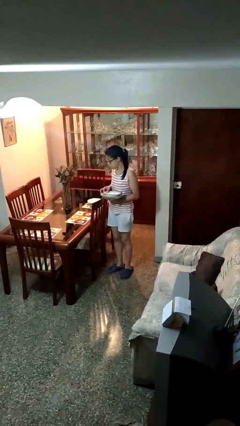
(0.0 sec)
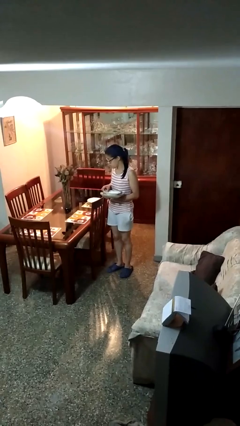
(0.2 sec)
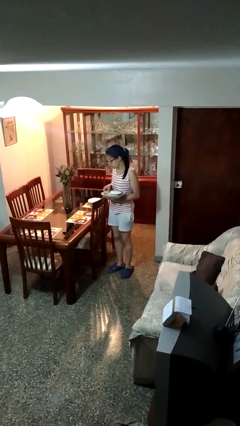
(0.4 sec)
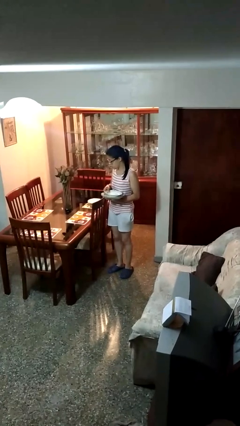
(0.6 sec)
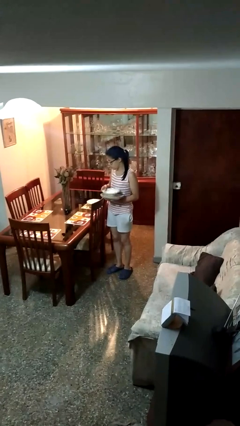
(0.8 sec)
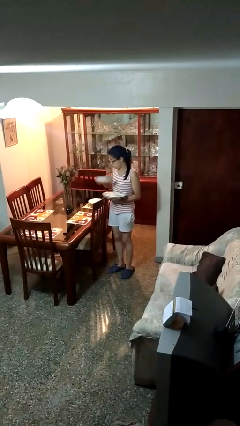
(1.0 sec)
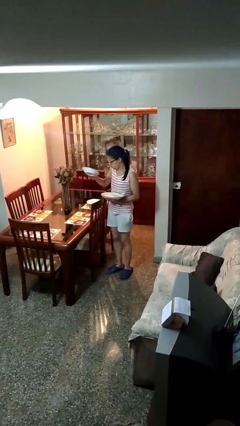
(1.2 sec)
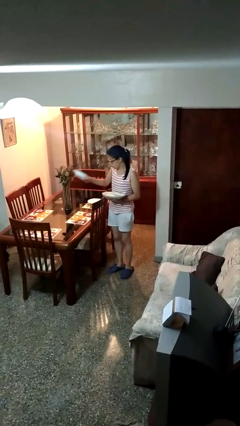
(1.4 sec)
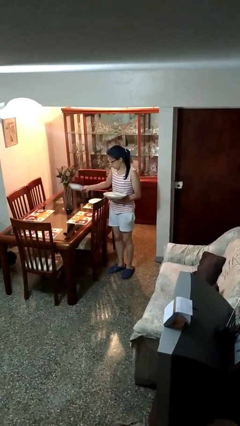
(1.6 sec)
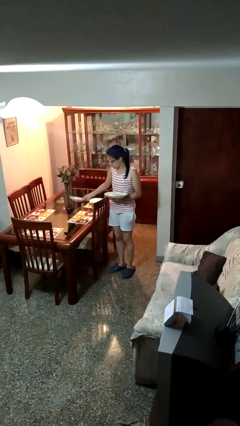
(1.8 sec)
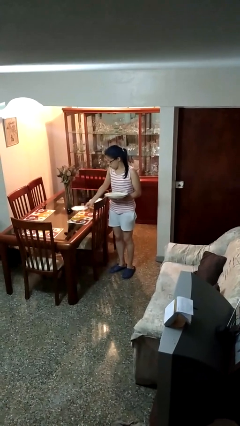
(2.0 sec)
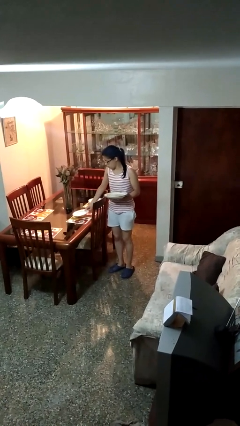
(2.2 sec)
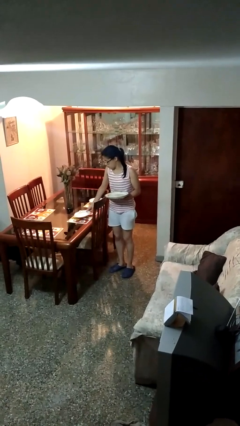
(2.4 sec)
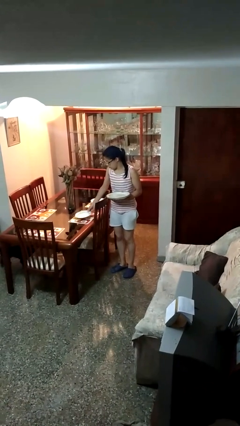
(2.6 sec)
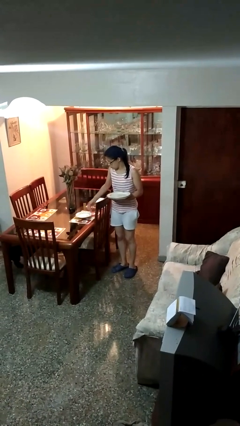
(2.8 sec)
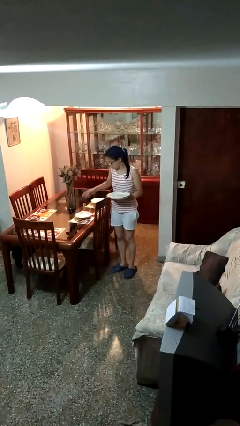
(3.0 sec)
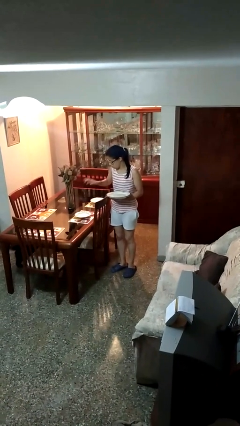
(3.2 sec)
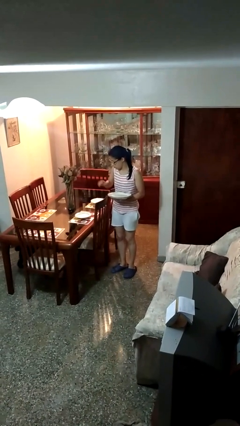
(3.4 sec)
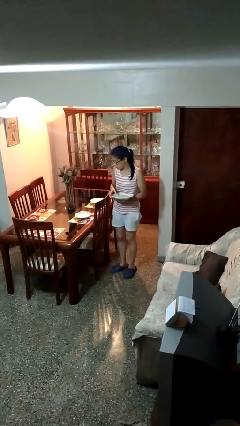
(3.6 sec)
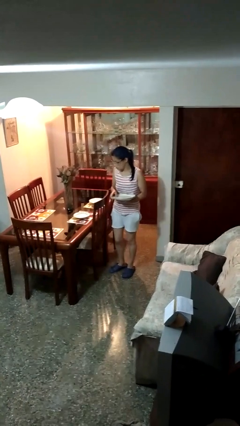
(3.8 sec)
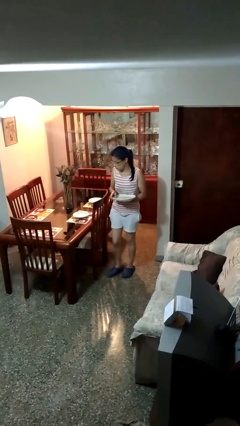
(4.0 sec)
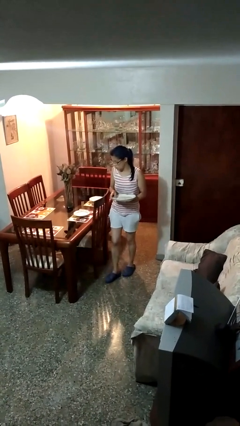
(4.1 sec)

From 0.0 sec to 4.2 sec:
person sets table

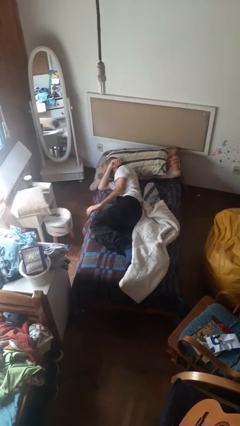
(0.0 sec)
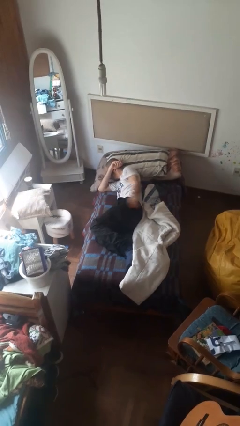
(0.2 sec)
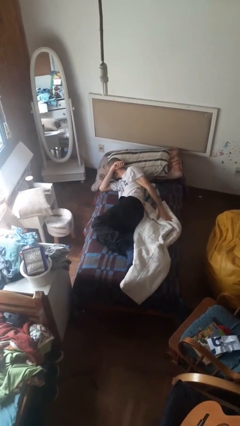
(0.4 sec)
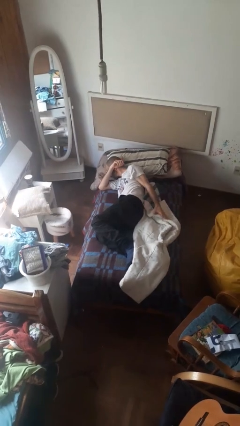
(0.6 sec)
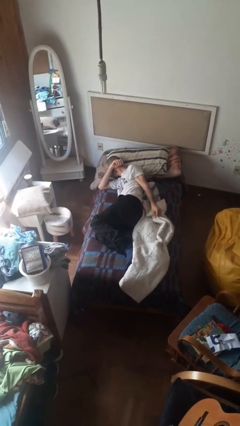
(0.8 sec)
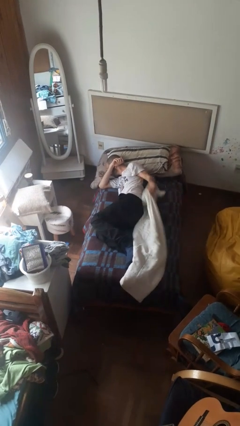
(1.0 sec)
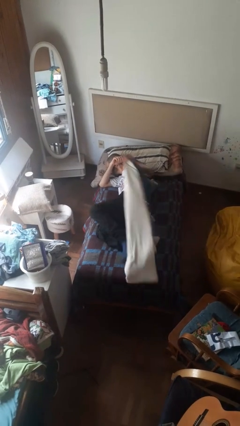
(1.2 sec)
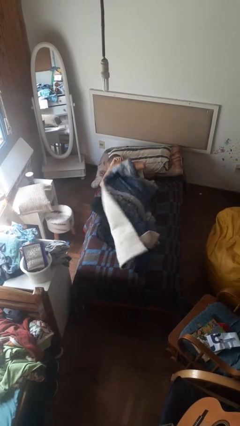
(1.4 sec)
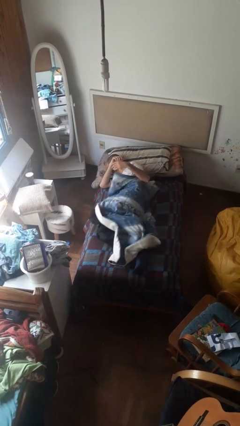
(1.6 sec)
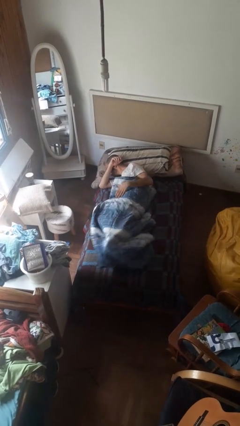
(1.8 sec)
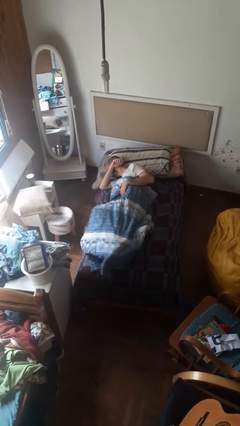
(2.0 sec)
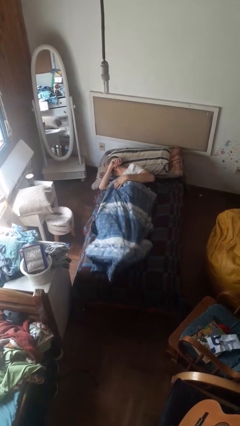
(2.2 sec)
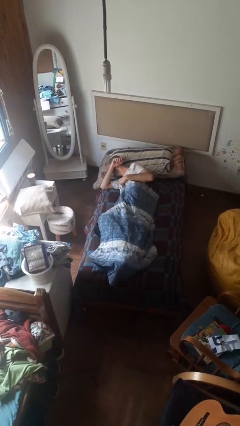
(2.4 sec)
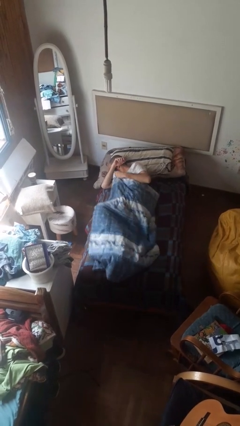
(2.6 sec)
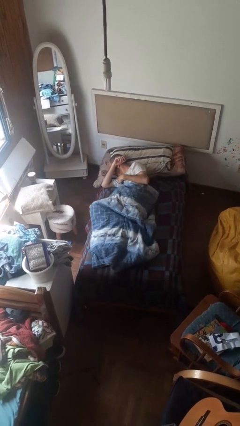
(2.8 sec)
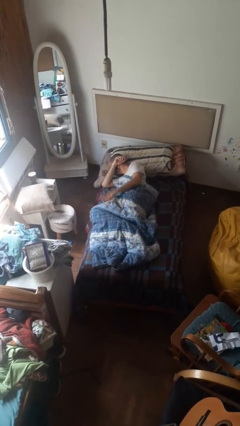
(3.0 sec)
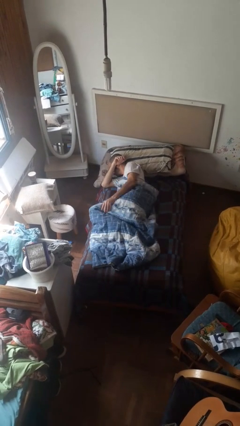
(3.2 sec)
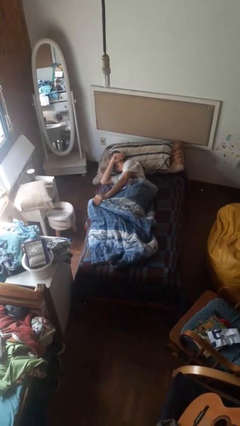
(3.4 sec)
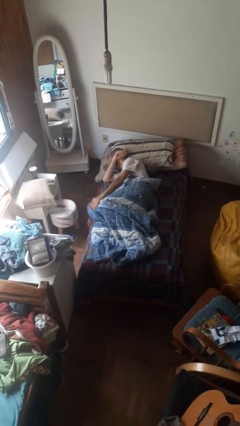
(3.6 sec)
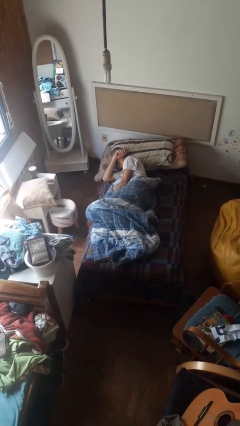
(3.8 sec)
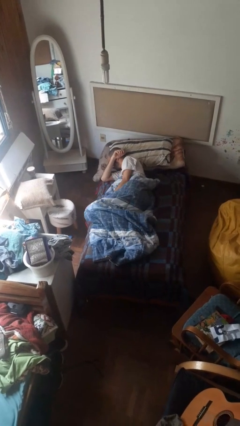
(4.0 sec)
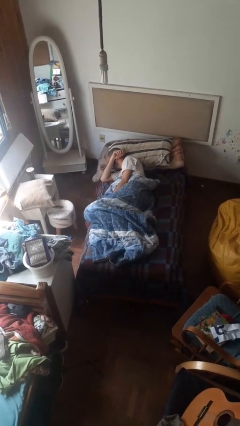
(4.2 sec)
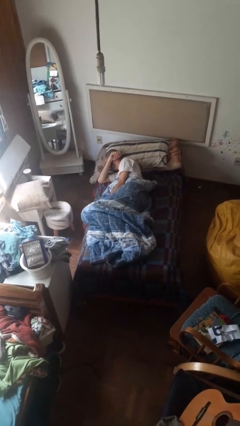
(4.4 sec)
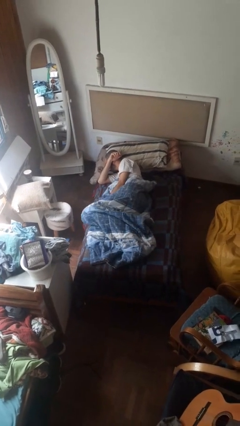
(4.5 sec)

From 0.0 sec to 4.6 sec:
person covers with bedsheets

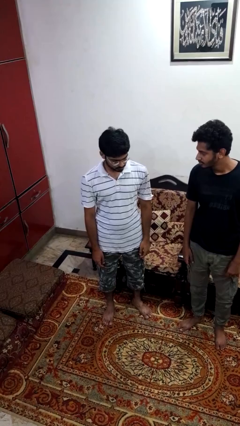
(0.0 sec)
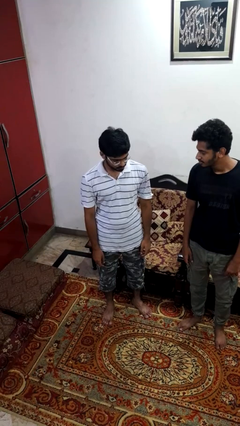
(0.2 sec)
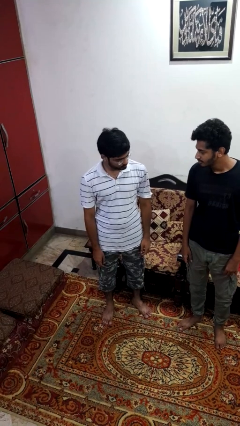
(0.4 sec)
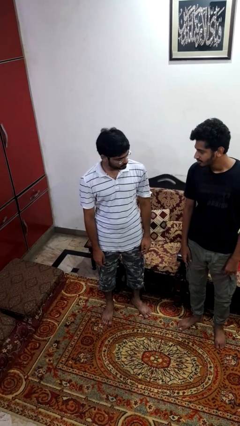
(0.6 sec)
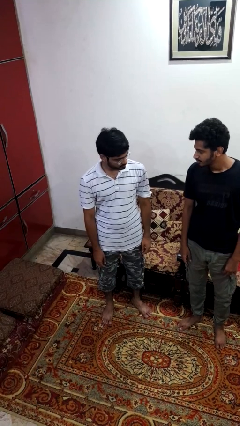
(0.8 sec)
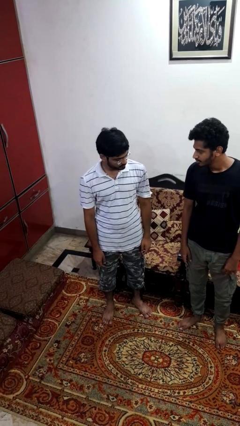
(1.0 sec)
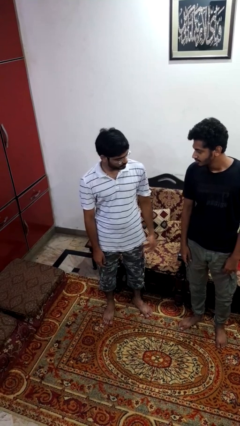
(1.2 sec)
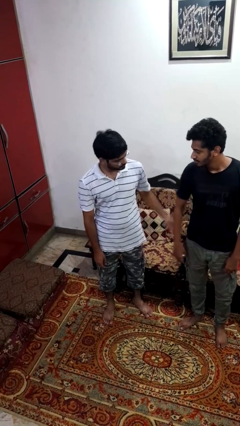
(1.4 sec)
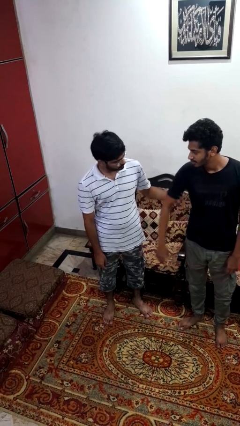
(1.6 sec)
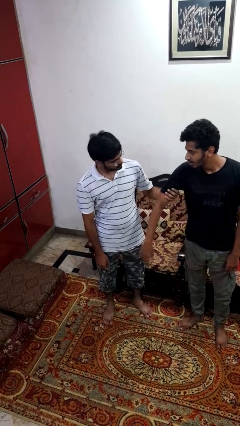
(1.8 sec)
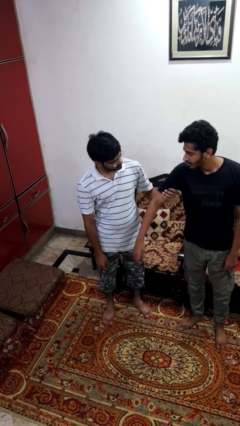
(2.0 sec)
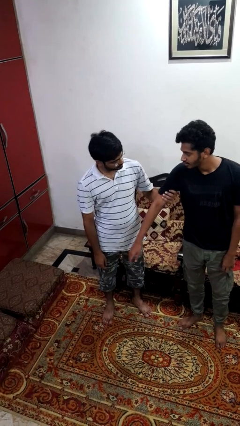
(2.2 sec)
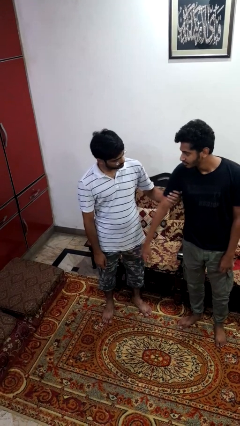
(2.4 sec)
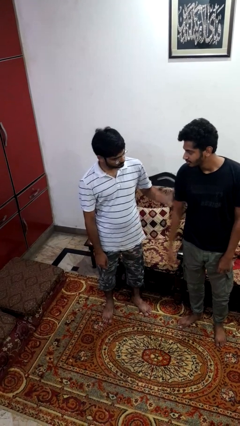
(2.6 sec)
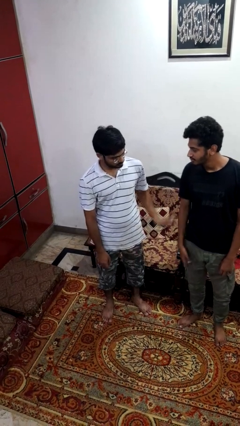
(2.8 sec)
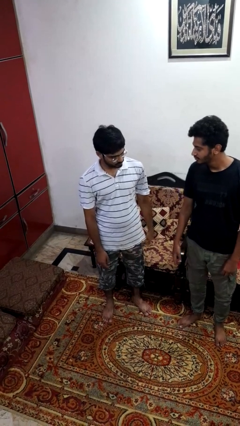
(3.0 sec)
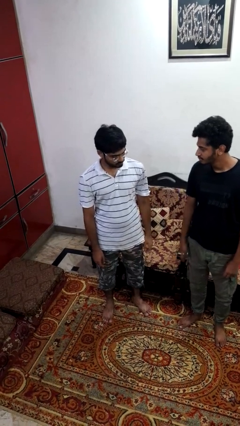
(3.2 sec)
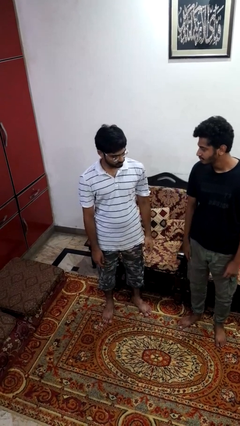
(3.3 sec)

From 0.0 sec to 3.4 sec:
person grabs person by bicep

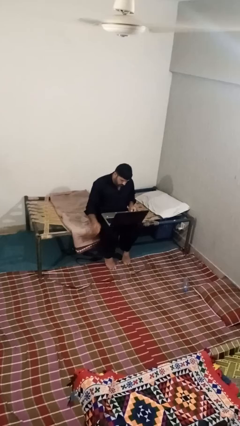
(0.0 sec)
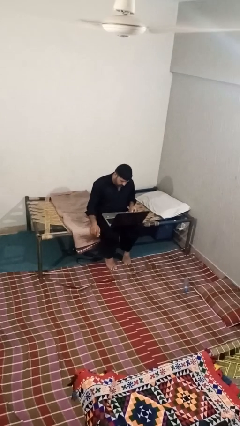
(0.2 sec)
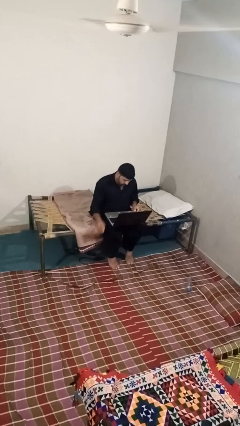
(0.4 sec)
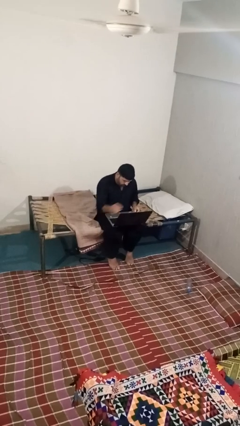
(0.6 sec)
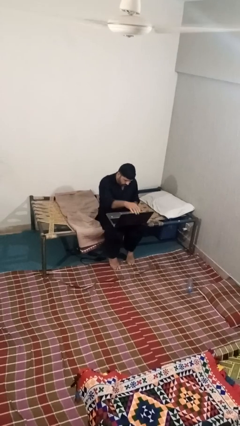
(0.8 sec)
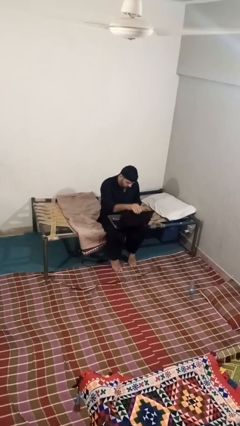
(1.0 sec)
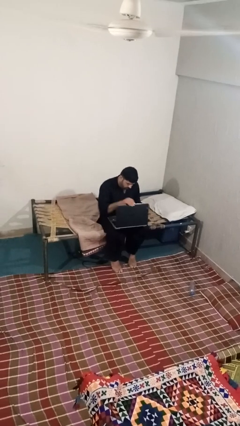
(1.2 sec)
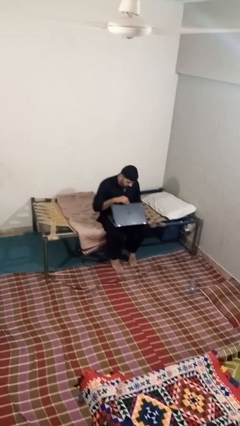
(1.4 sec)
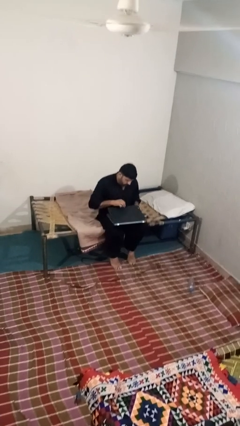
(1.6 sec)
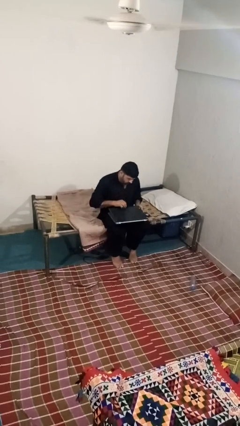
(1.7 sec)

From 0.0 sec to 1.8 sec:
person closes laptop

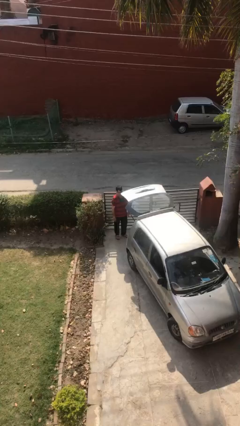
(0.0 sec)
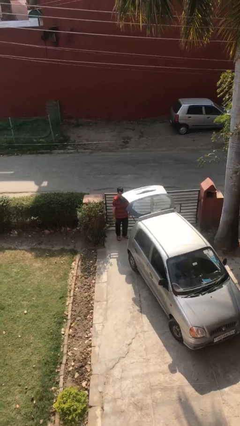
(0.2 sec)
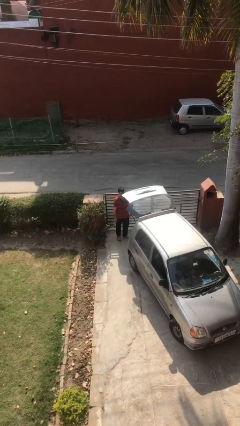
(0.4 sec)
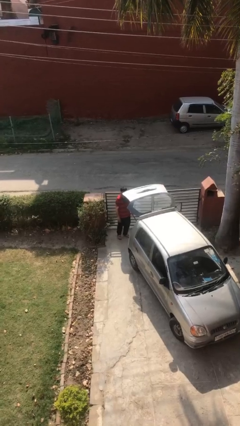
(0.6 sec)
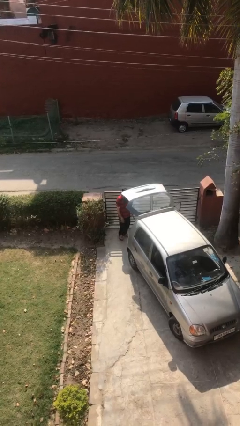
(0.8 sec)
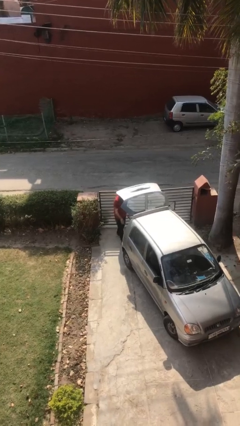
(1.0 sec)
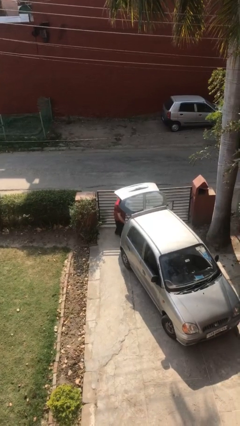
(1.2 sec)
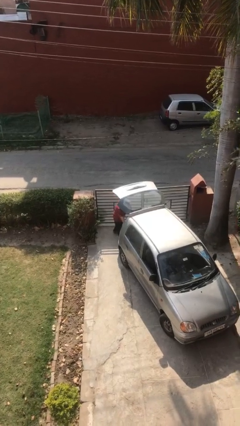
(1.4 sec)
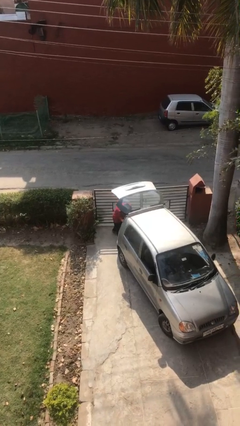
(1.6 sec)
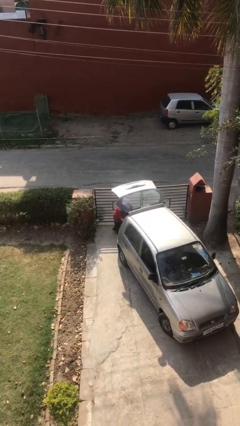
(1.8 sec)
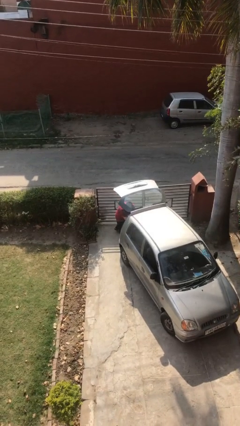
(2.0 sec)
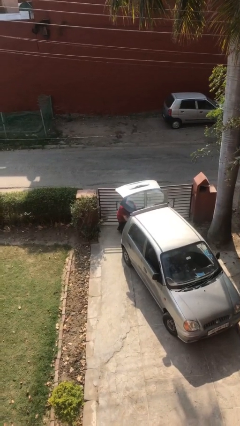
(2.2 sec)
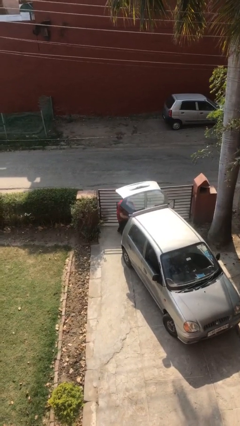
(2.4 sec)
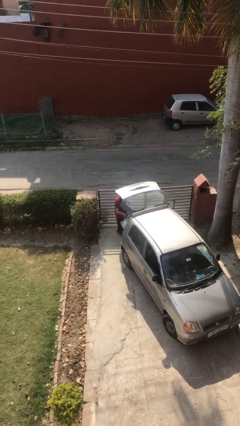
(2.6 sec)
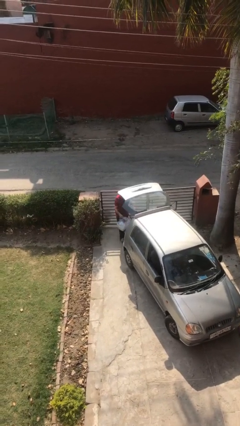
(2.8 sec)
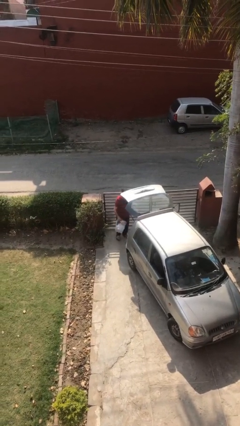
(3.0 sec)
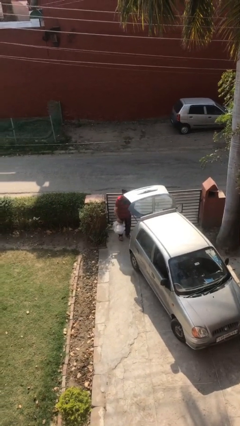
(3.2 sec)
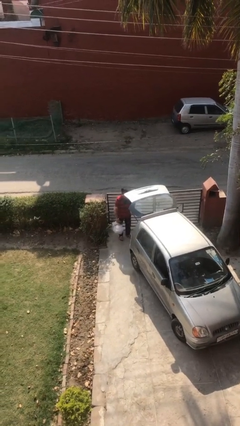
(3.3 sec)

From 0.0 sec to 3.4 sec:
person unloads car
